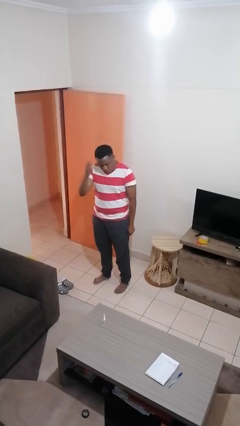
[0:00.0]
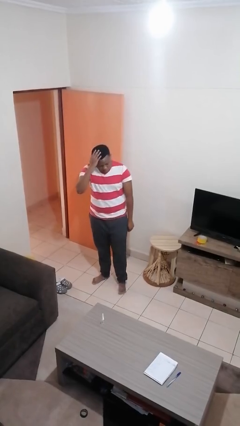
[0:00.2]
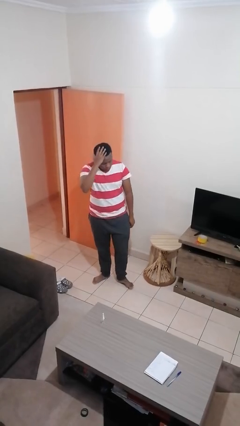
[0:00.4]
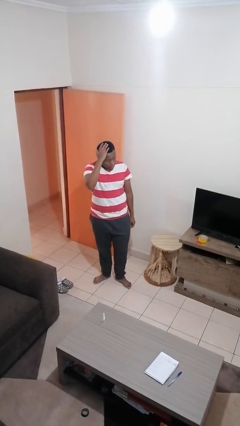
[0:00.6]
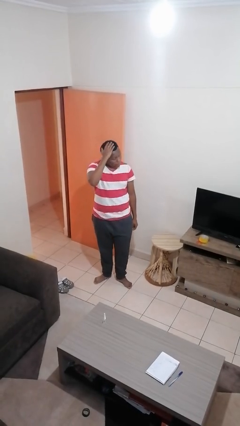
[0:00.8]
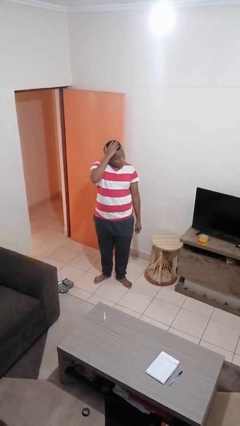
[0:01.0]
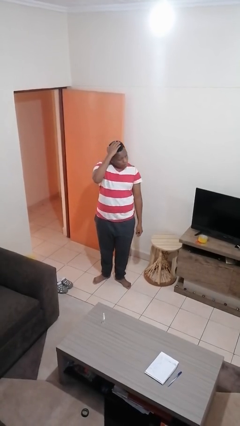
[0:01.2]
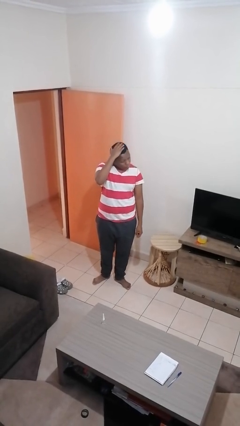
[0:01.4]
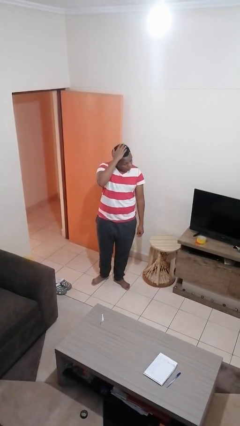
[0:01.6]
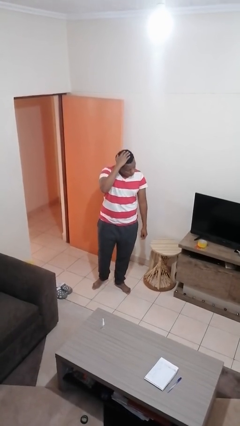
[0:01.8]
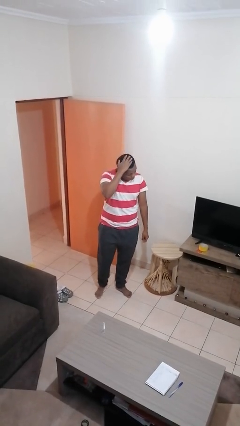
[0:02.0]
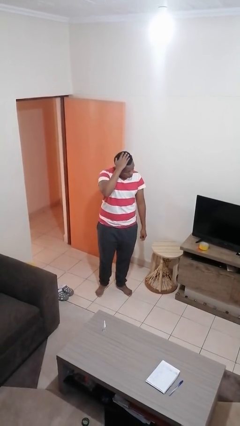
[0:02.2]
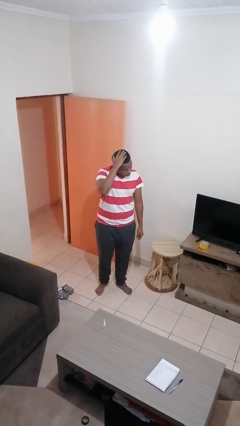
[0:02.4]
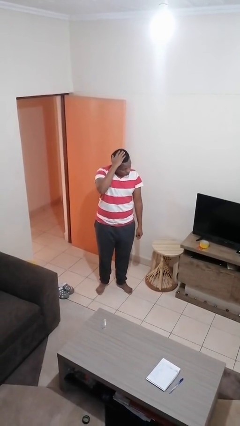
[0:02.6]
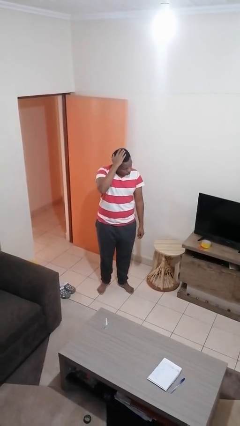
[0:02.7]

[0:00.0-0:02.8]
person pats head

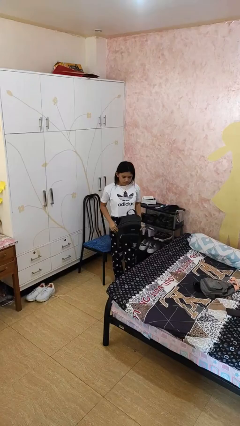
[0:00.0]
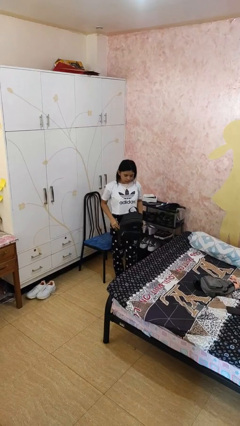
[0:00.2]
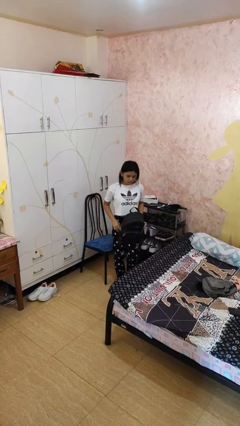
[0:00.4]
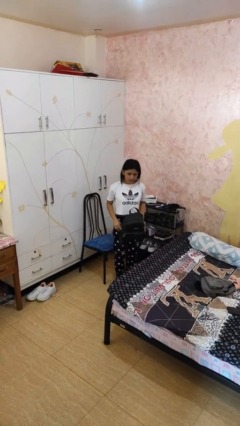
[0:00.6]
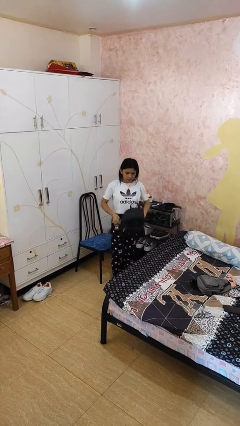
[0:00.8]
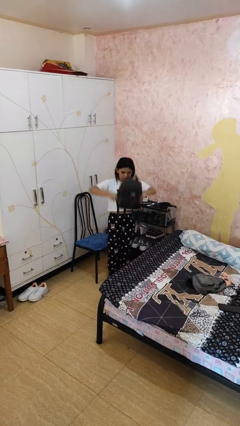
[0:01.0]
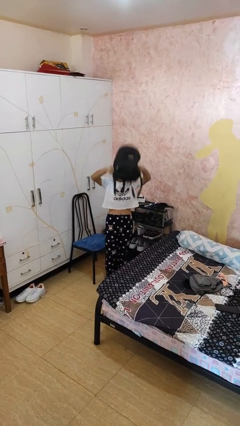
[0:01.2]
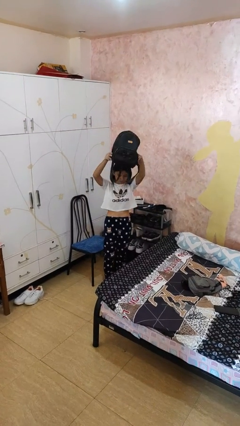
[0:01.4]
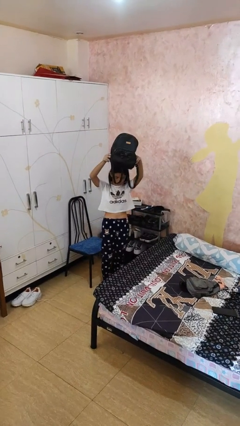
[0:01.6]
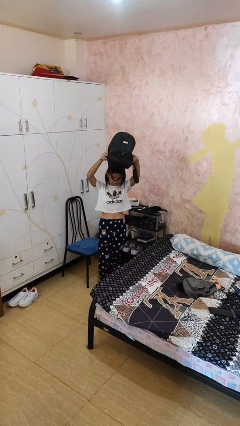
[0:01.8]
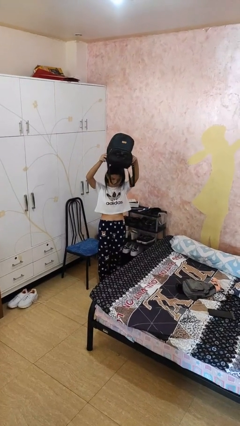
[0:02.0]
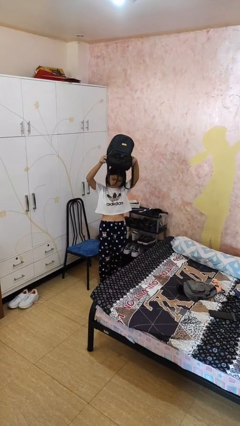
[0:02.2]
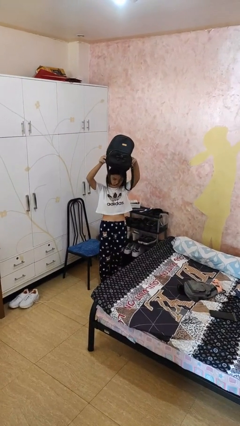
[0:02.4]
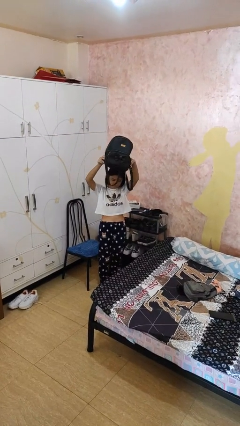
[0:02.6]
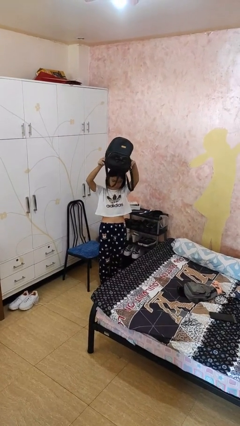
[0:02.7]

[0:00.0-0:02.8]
person holds object above head

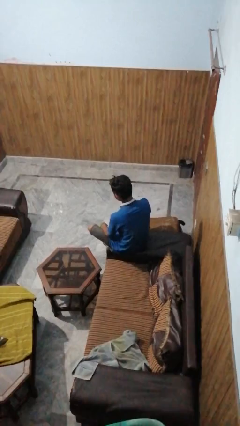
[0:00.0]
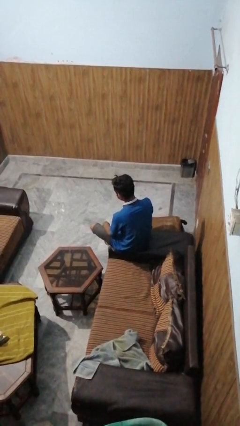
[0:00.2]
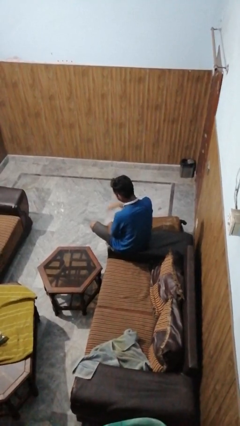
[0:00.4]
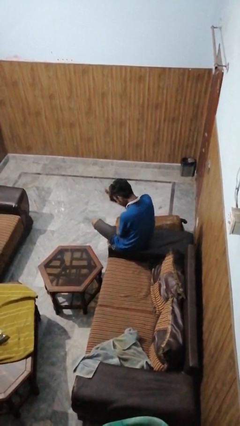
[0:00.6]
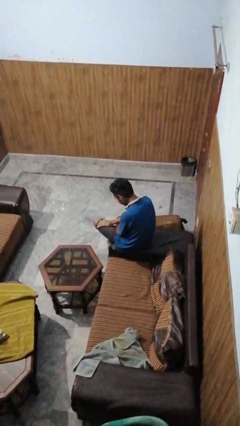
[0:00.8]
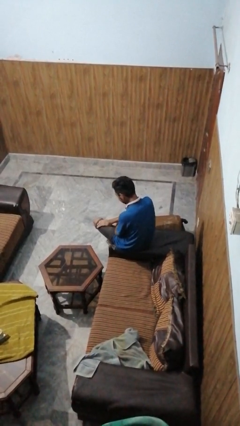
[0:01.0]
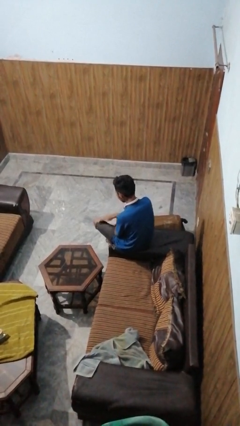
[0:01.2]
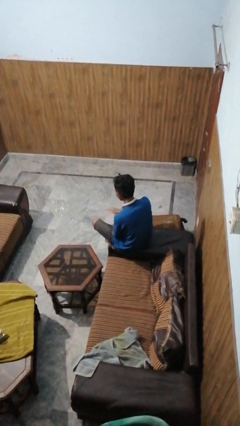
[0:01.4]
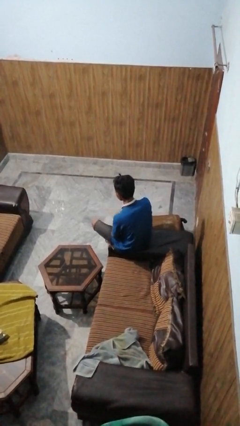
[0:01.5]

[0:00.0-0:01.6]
person swats bug

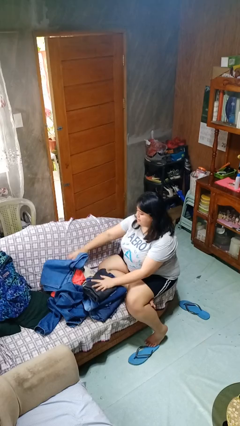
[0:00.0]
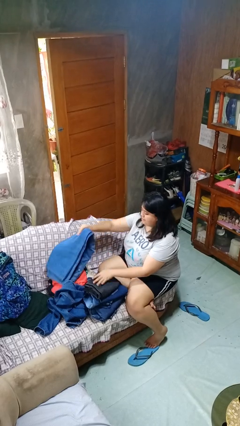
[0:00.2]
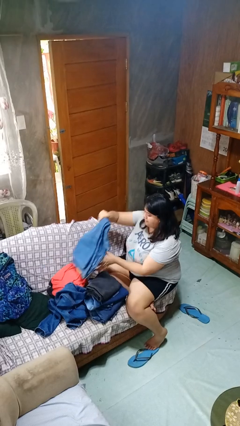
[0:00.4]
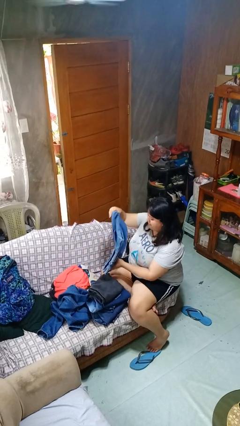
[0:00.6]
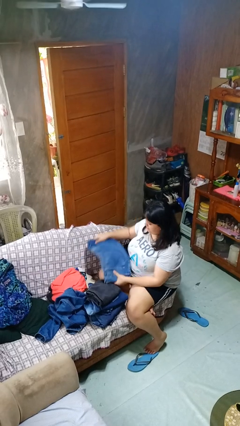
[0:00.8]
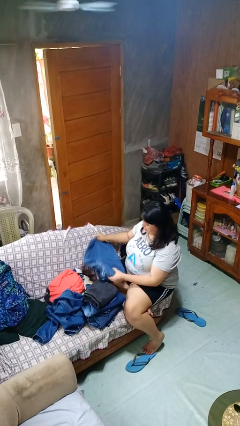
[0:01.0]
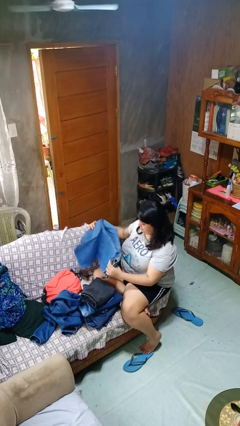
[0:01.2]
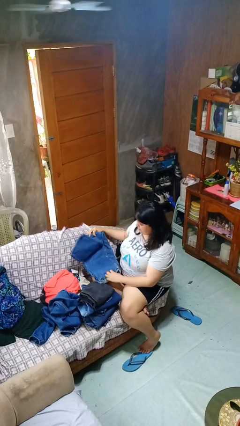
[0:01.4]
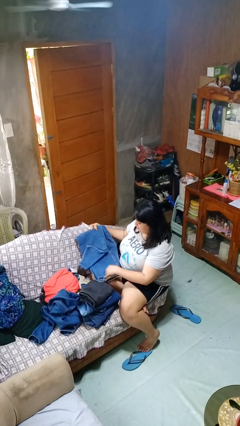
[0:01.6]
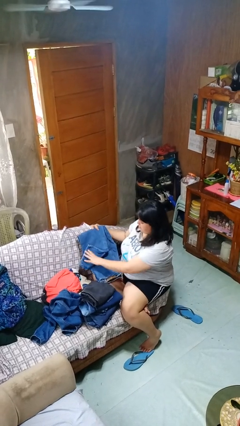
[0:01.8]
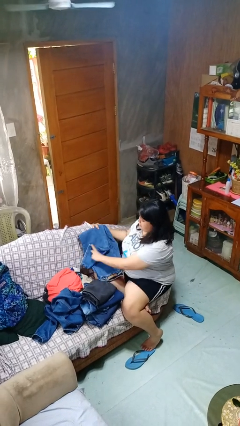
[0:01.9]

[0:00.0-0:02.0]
person folds pants

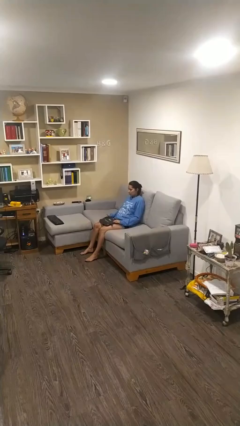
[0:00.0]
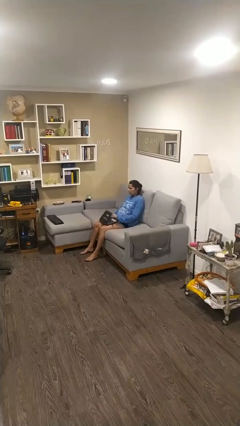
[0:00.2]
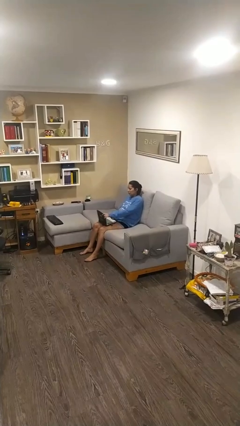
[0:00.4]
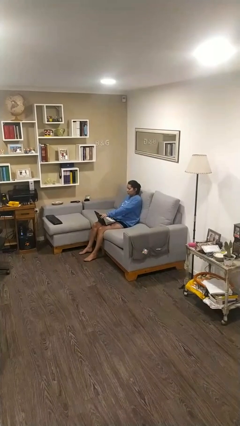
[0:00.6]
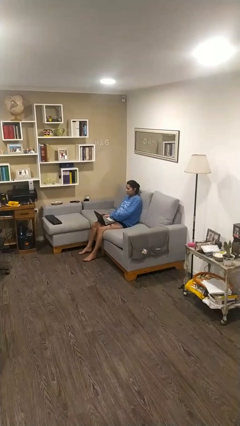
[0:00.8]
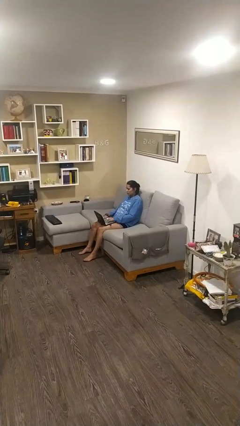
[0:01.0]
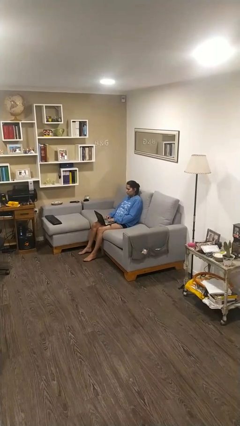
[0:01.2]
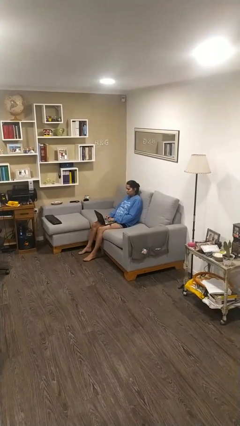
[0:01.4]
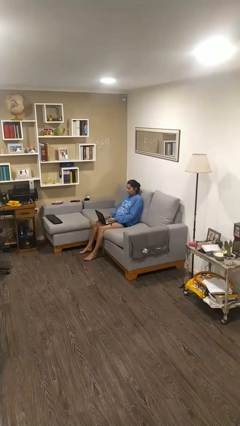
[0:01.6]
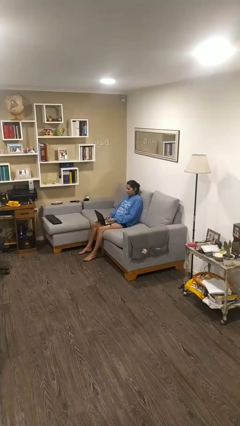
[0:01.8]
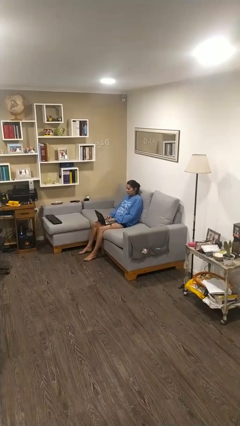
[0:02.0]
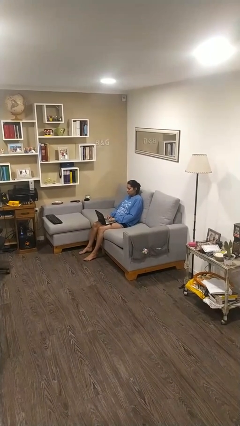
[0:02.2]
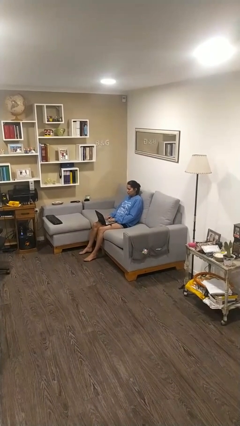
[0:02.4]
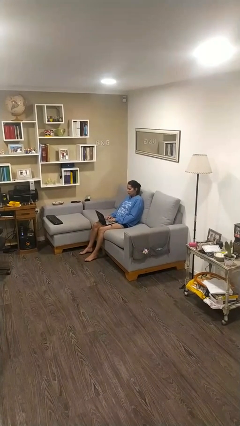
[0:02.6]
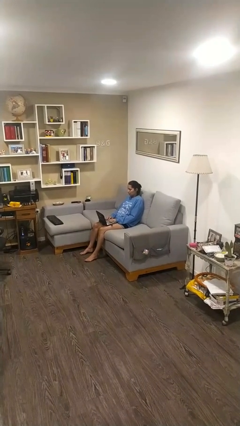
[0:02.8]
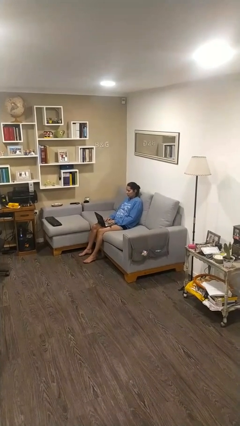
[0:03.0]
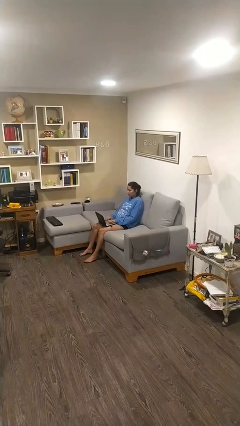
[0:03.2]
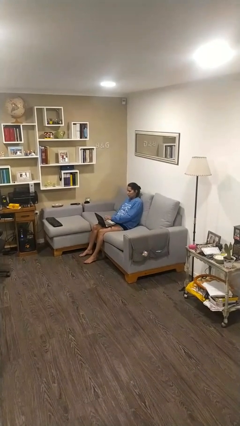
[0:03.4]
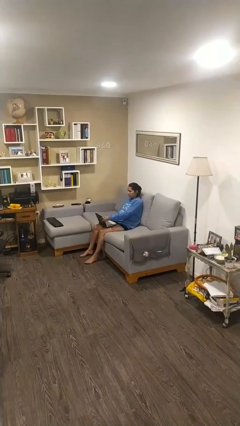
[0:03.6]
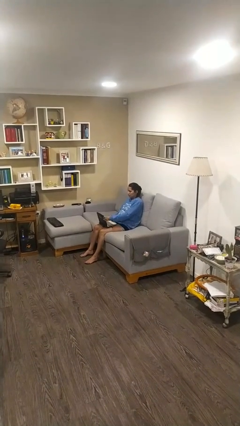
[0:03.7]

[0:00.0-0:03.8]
person interacts with laptop

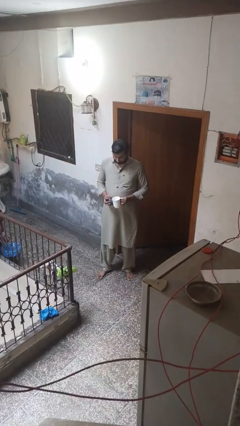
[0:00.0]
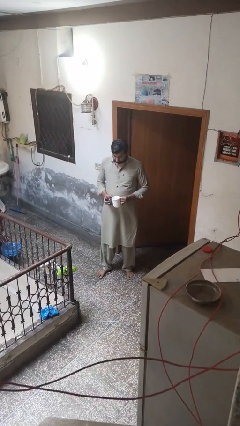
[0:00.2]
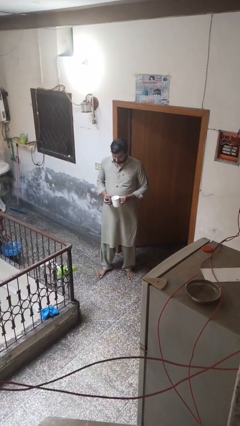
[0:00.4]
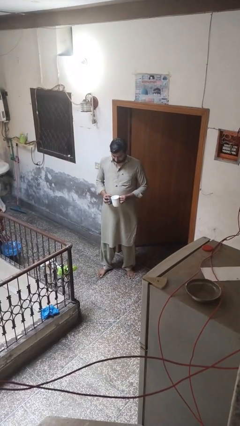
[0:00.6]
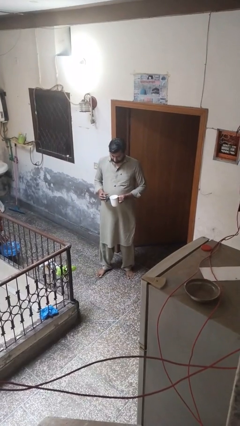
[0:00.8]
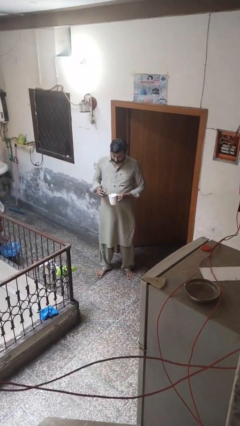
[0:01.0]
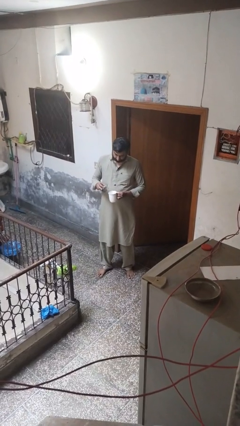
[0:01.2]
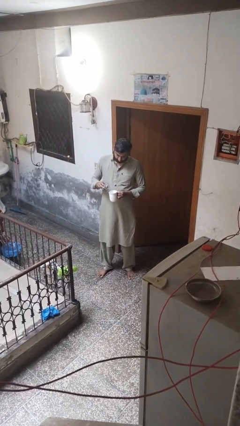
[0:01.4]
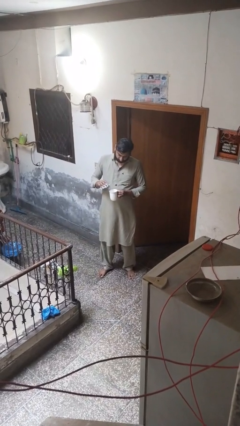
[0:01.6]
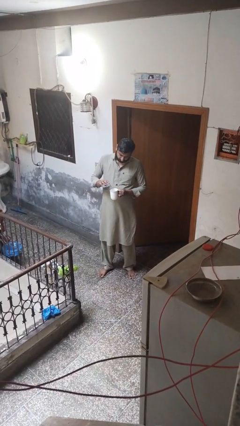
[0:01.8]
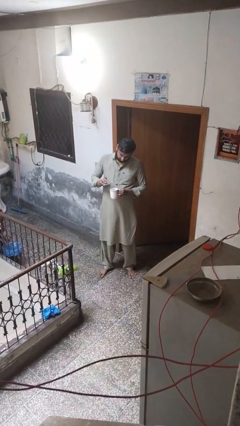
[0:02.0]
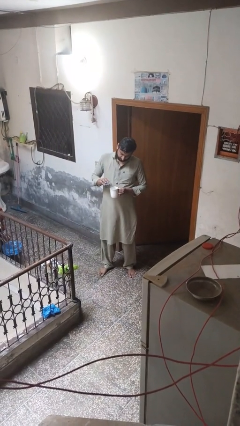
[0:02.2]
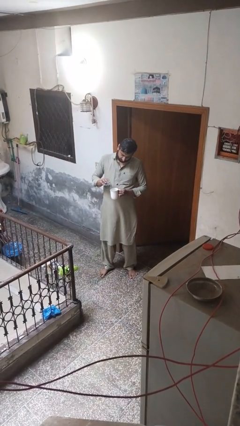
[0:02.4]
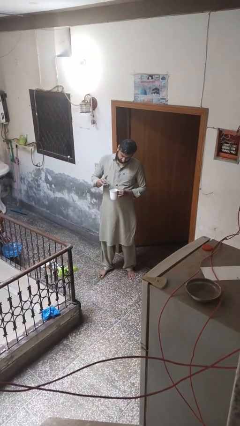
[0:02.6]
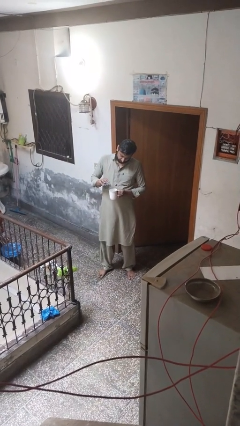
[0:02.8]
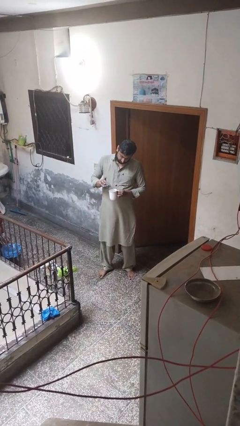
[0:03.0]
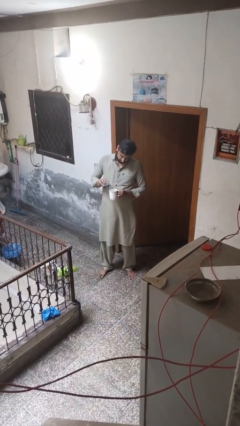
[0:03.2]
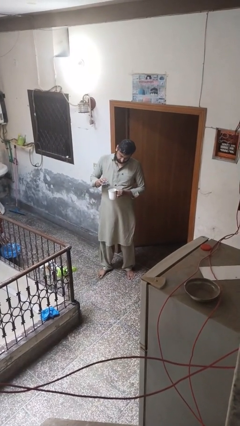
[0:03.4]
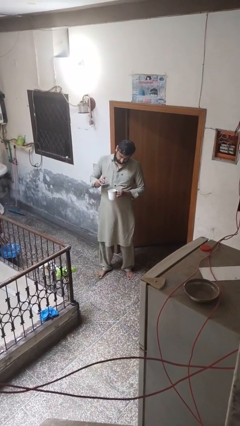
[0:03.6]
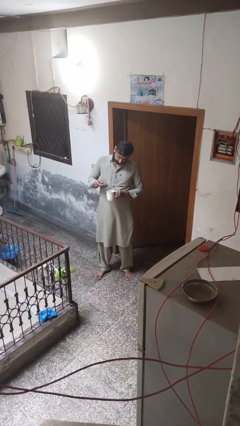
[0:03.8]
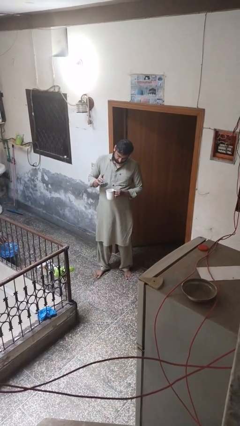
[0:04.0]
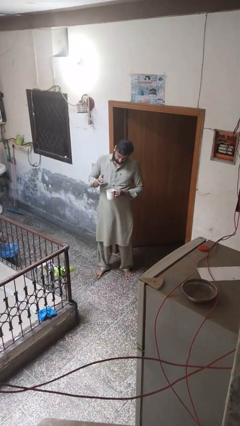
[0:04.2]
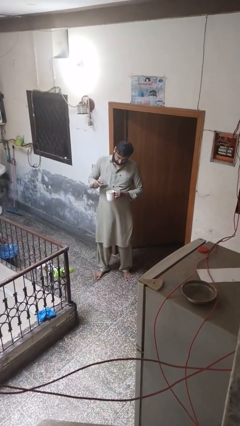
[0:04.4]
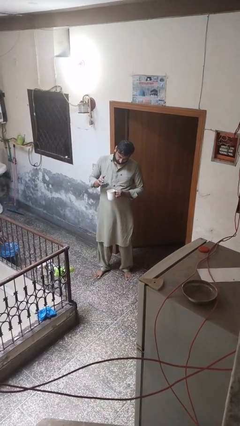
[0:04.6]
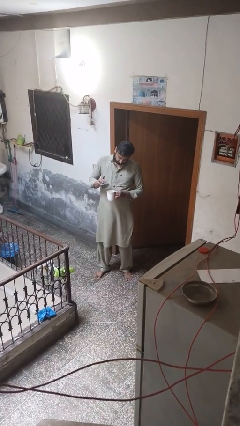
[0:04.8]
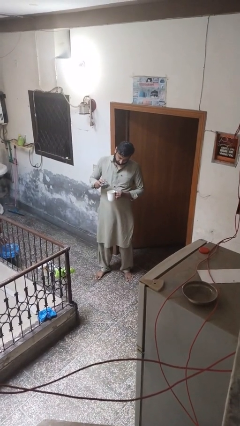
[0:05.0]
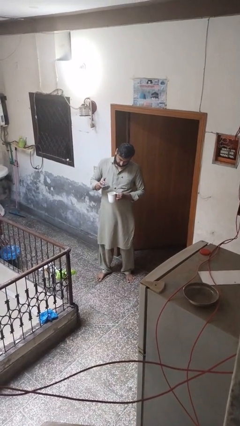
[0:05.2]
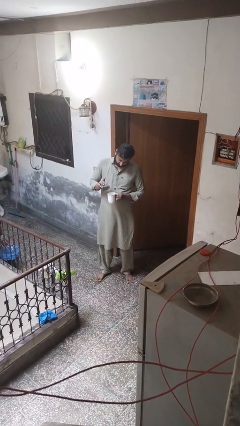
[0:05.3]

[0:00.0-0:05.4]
person pours coffee into mug
